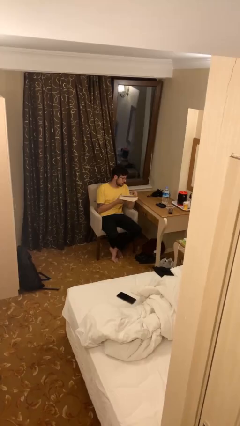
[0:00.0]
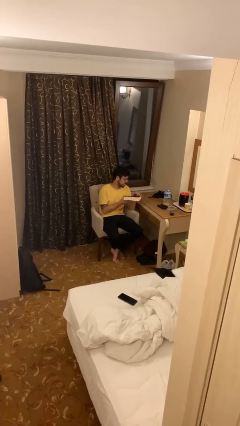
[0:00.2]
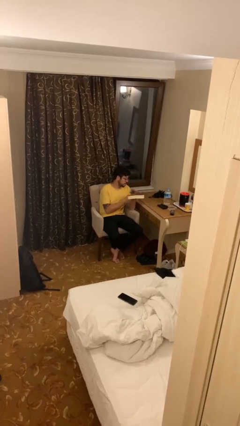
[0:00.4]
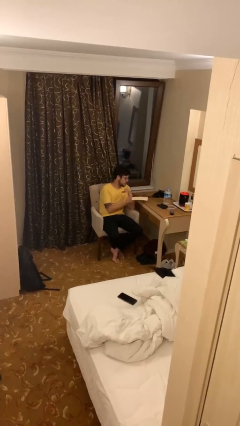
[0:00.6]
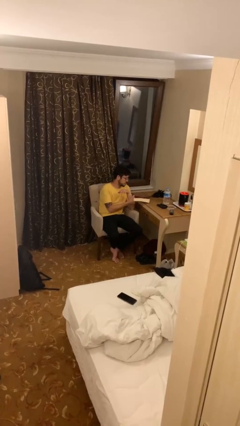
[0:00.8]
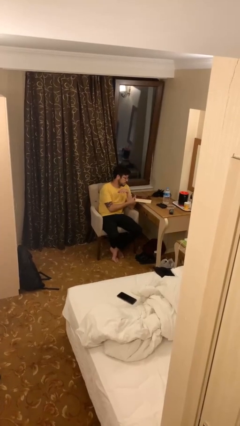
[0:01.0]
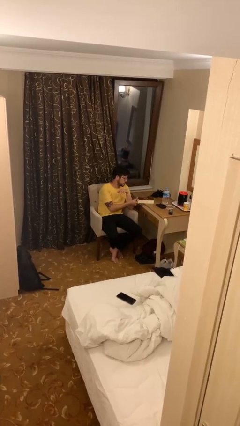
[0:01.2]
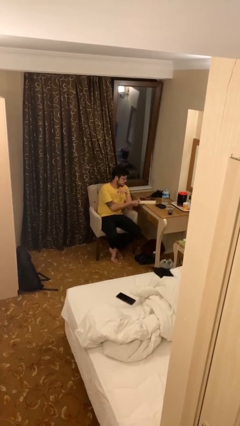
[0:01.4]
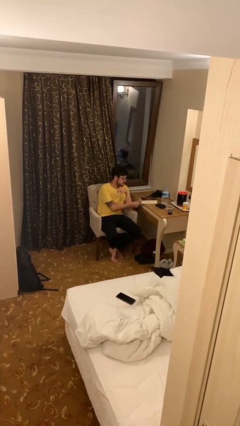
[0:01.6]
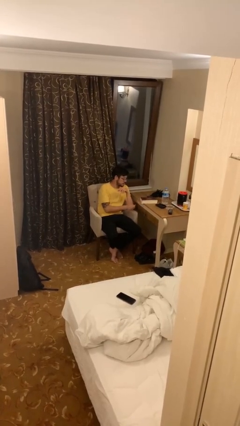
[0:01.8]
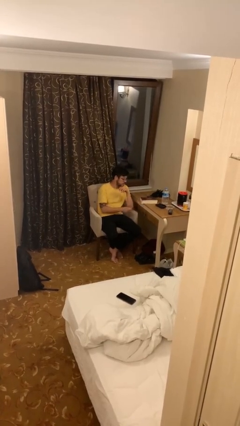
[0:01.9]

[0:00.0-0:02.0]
person puts down object on table

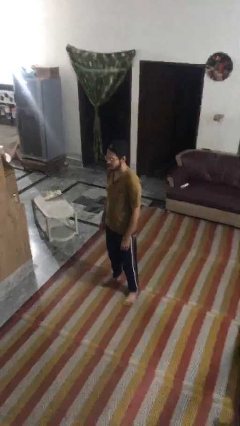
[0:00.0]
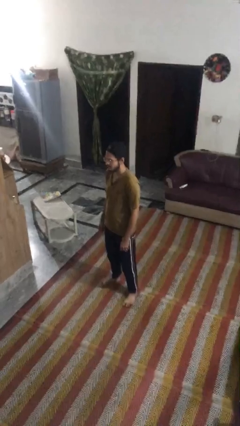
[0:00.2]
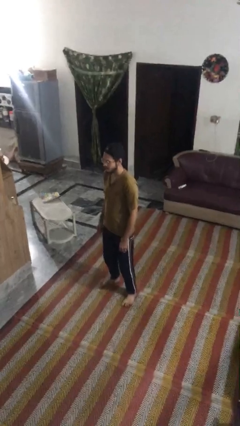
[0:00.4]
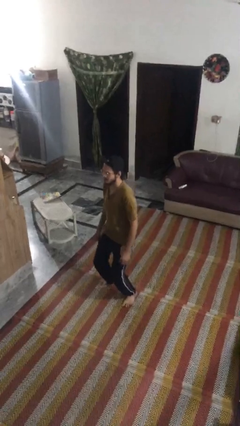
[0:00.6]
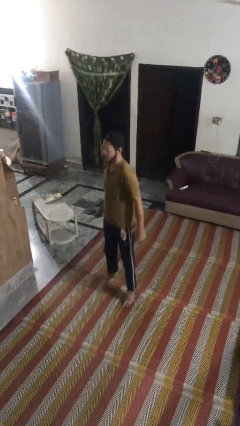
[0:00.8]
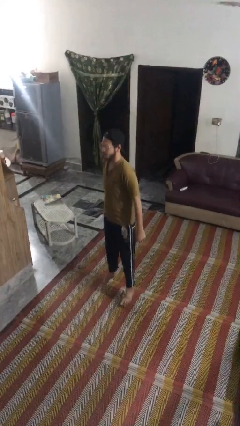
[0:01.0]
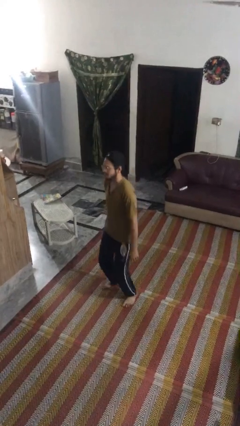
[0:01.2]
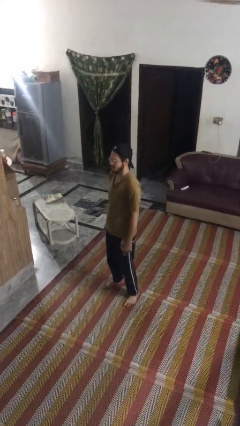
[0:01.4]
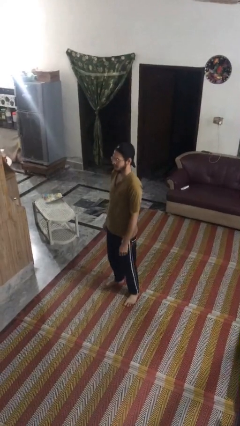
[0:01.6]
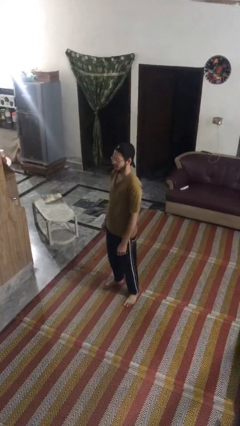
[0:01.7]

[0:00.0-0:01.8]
person jumps

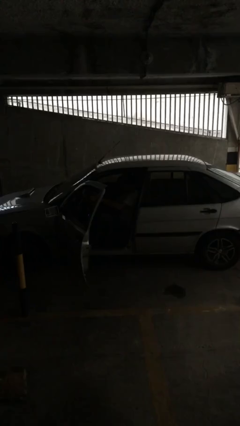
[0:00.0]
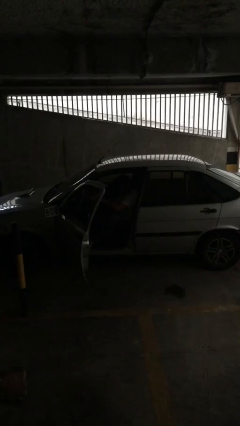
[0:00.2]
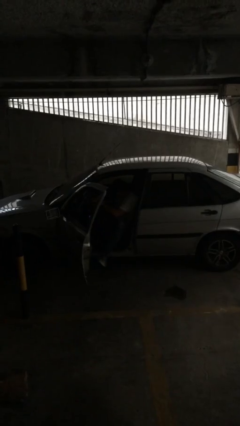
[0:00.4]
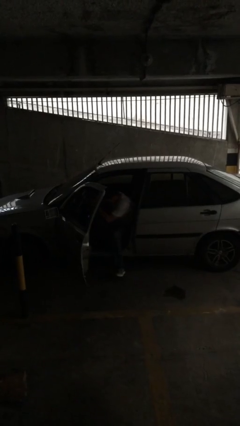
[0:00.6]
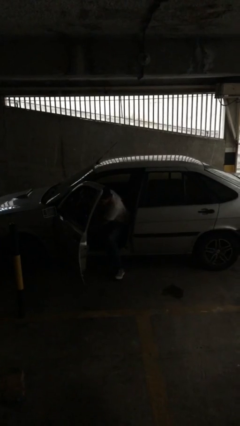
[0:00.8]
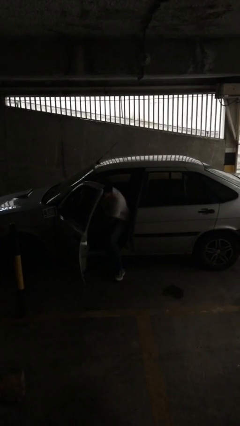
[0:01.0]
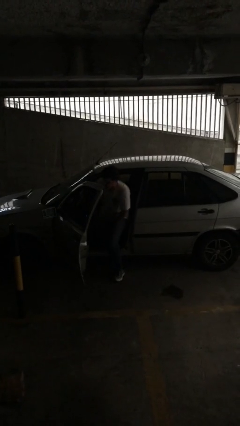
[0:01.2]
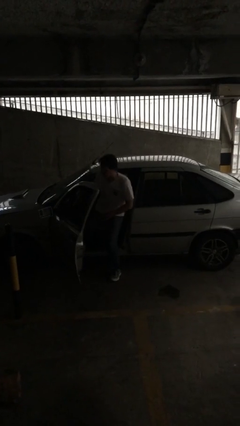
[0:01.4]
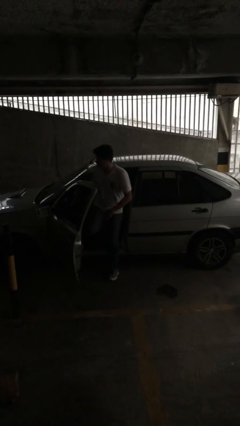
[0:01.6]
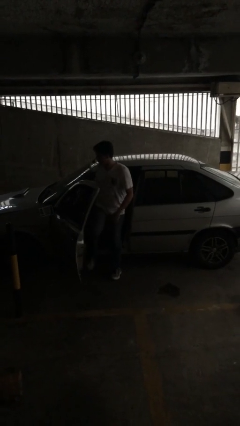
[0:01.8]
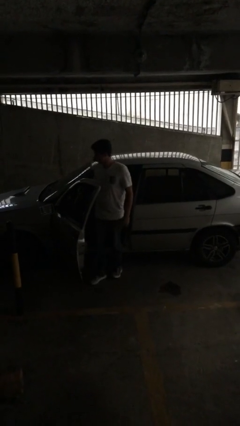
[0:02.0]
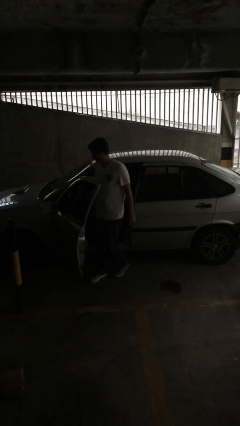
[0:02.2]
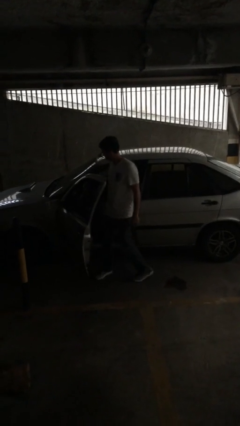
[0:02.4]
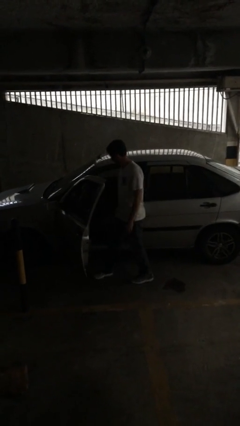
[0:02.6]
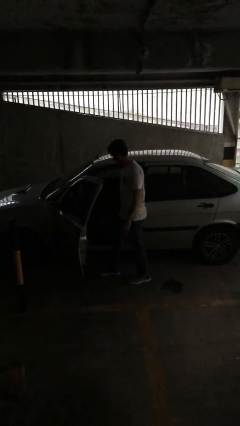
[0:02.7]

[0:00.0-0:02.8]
person exits car

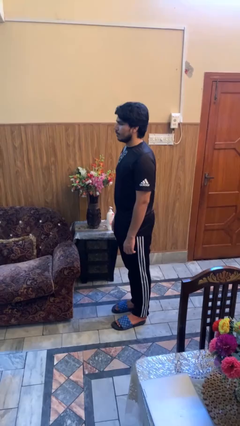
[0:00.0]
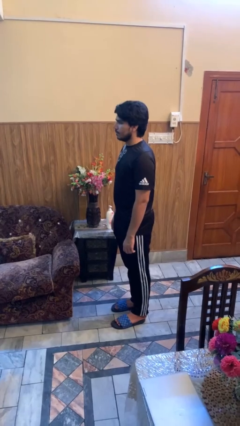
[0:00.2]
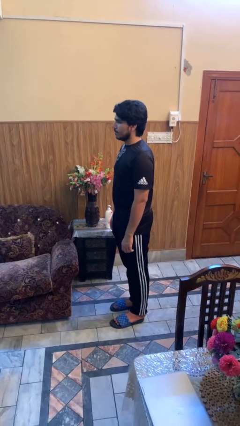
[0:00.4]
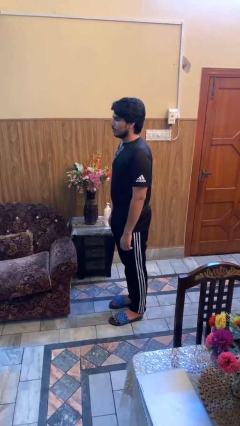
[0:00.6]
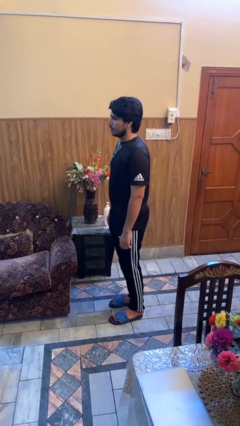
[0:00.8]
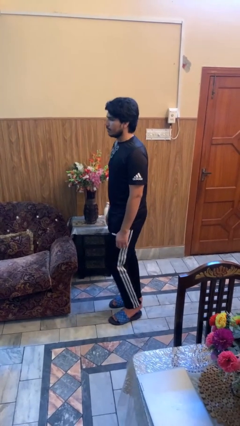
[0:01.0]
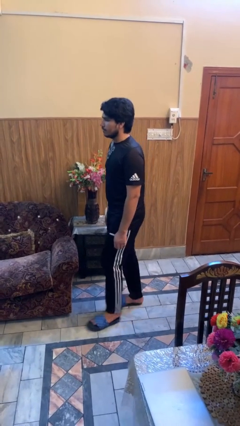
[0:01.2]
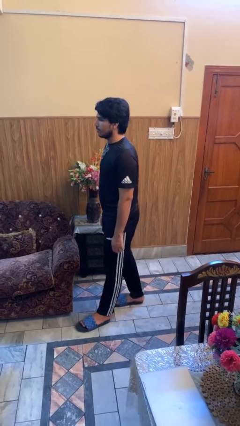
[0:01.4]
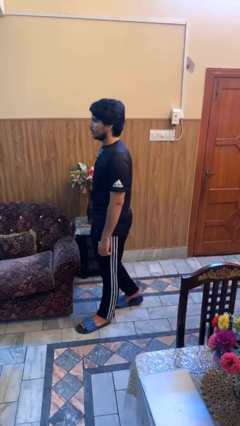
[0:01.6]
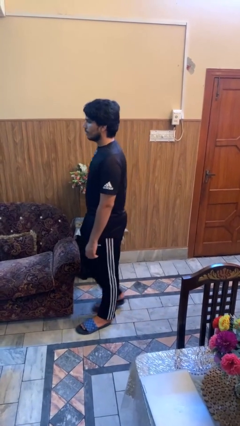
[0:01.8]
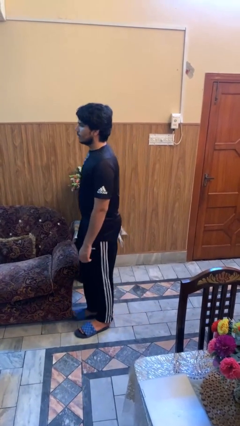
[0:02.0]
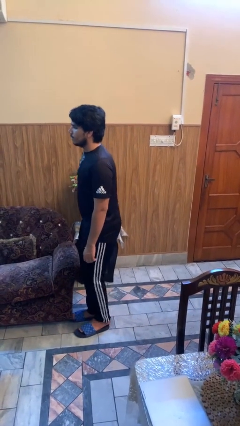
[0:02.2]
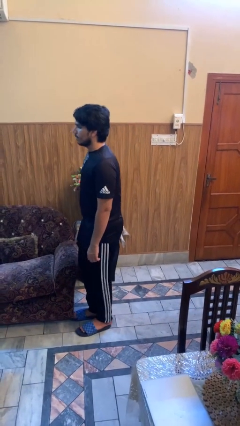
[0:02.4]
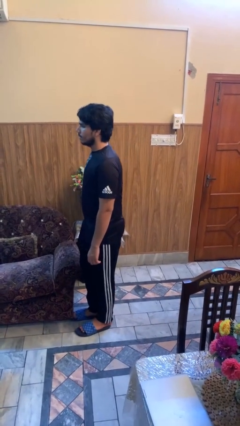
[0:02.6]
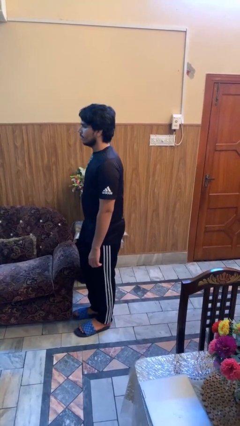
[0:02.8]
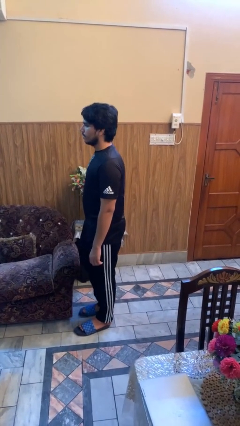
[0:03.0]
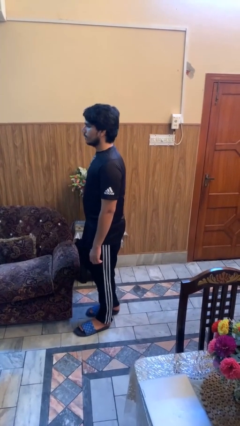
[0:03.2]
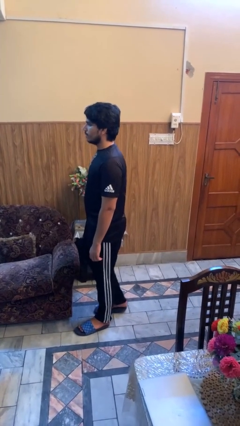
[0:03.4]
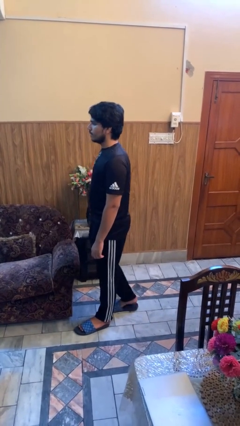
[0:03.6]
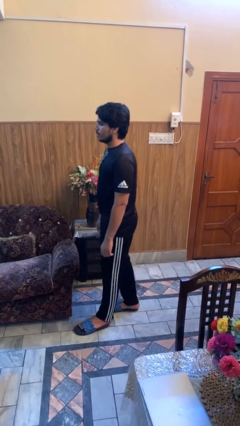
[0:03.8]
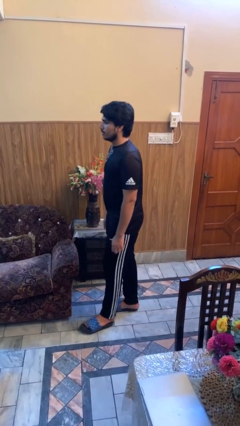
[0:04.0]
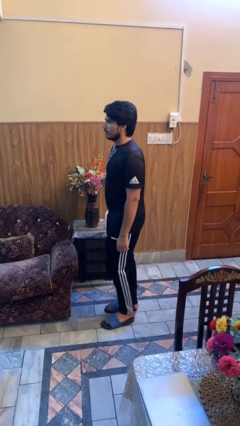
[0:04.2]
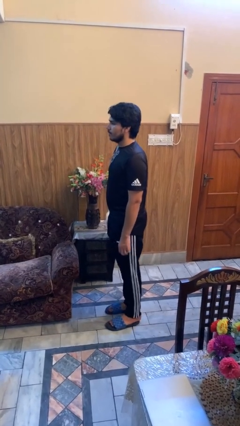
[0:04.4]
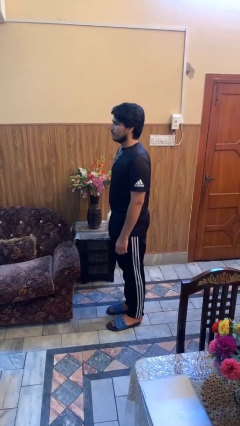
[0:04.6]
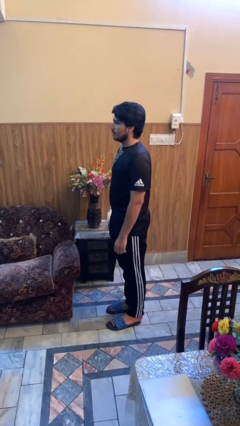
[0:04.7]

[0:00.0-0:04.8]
person stubs toe

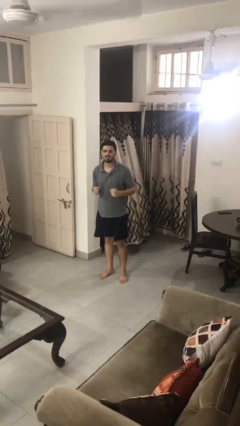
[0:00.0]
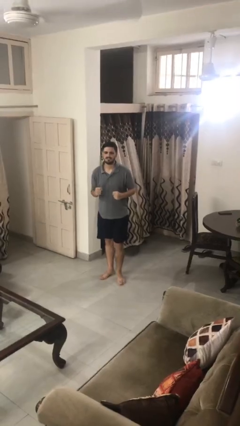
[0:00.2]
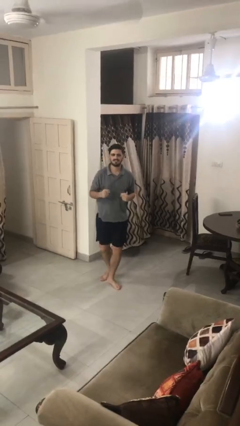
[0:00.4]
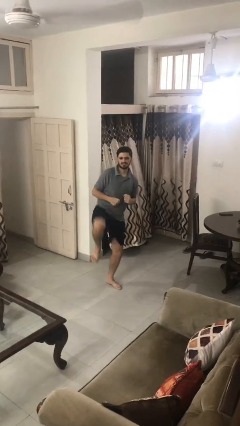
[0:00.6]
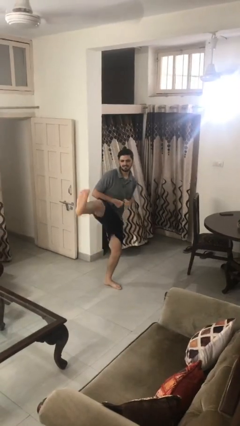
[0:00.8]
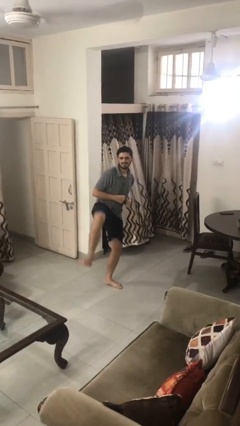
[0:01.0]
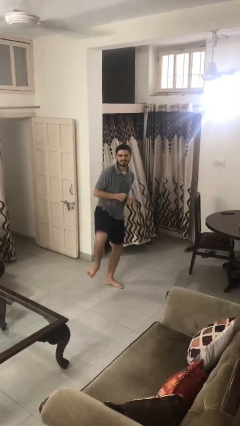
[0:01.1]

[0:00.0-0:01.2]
person karate kicks

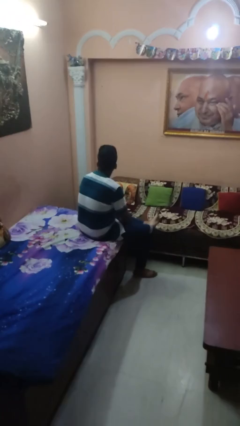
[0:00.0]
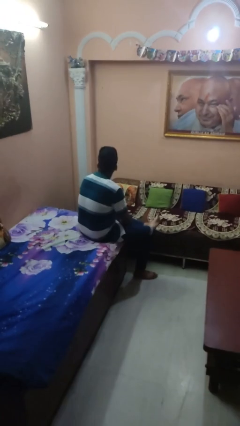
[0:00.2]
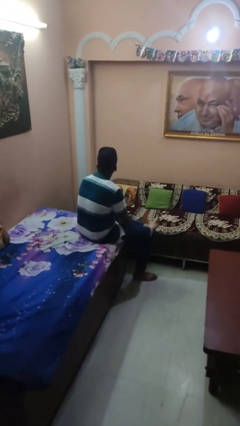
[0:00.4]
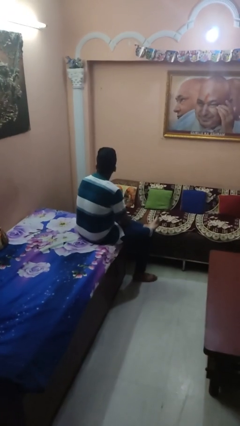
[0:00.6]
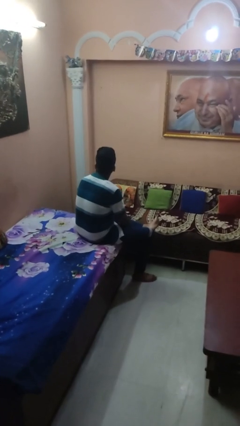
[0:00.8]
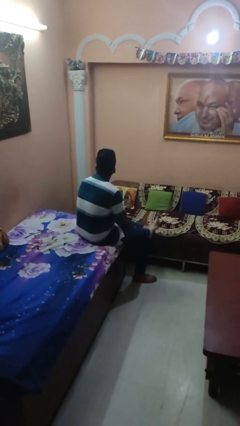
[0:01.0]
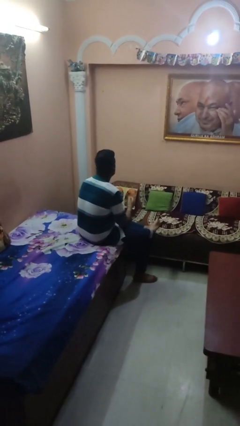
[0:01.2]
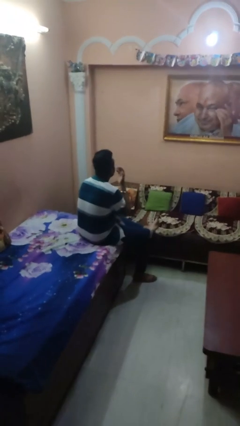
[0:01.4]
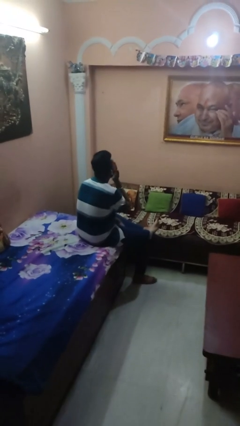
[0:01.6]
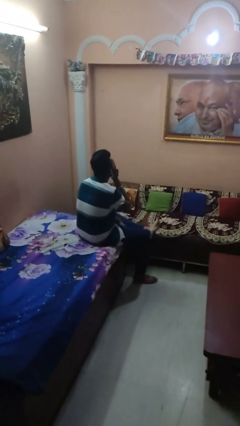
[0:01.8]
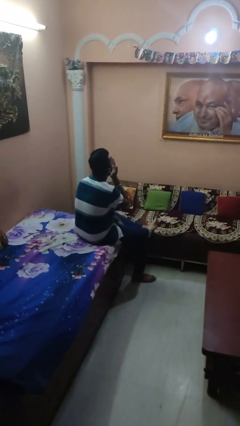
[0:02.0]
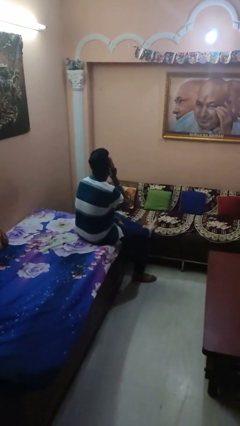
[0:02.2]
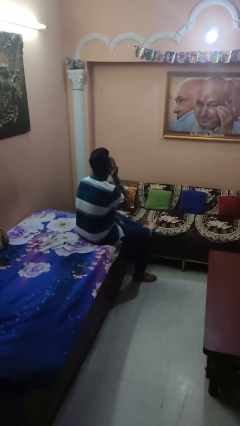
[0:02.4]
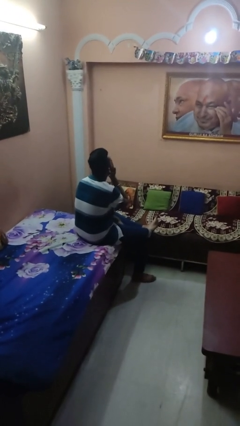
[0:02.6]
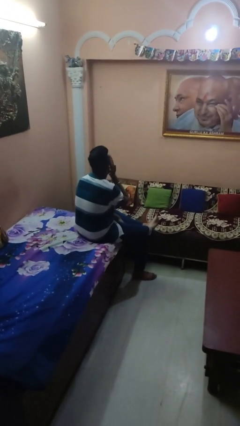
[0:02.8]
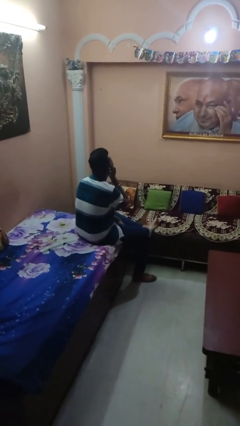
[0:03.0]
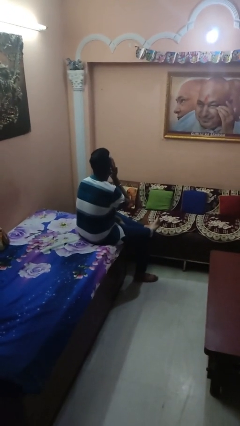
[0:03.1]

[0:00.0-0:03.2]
person yawns

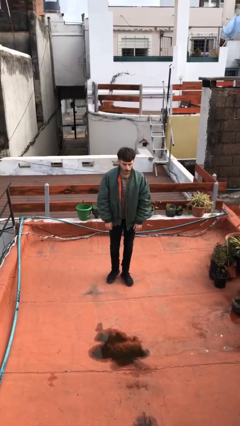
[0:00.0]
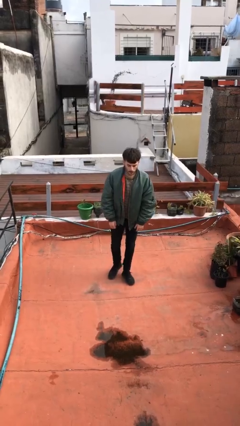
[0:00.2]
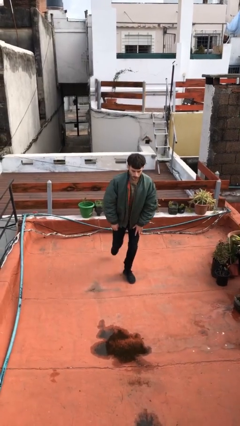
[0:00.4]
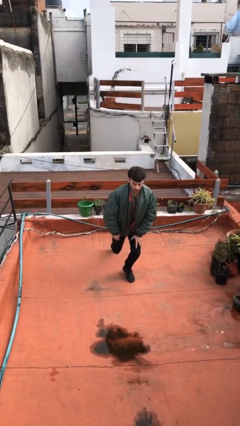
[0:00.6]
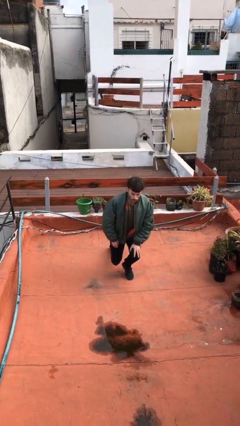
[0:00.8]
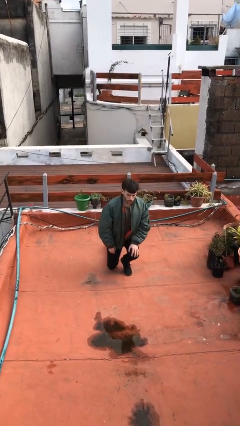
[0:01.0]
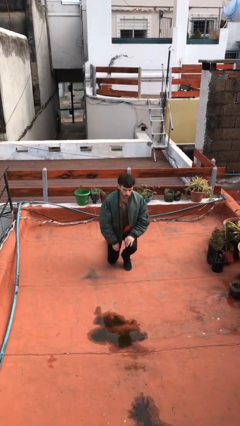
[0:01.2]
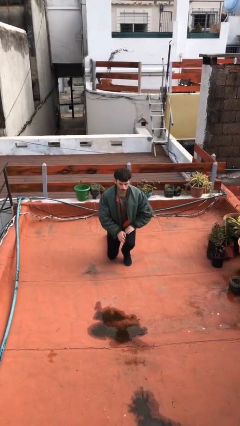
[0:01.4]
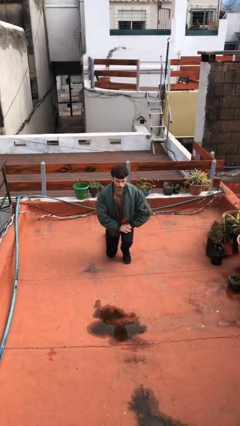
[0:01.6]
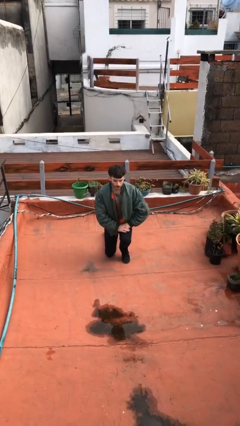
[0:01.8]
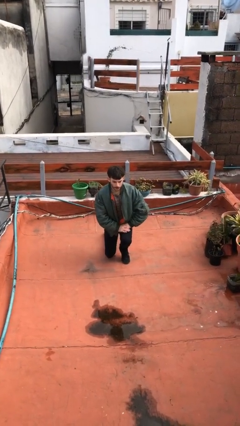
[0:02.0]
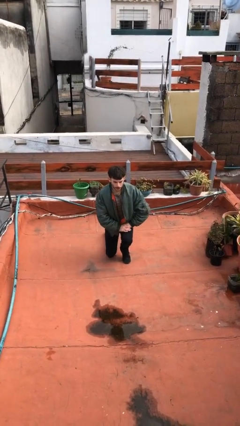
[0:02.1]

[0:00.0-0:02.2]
person kneels
